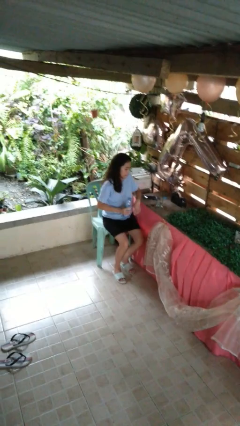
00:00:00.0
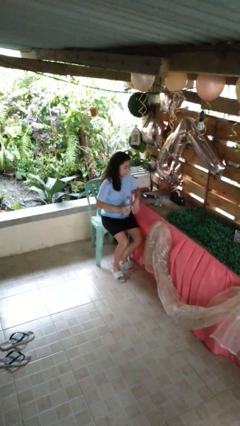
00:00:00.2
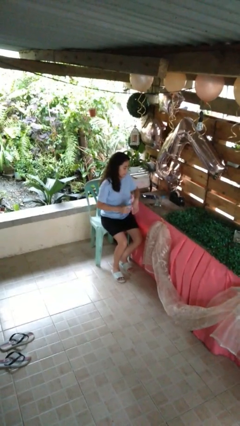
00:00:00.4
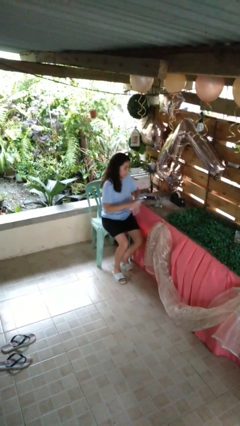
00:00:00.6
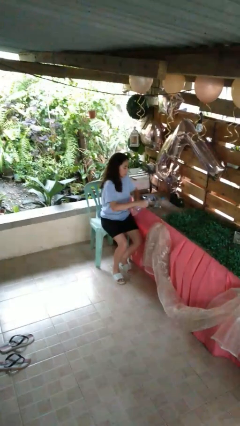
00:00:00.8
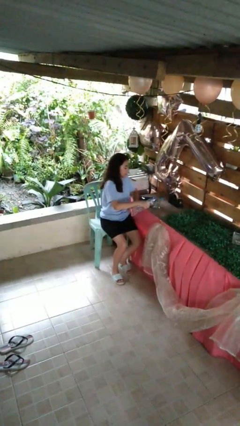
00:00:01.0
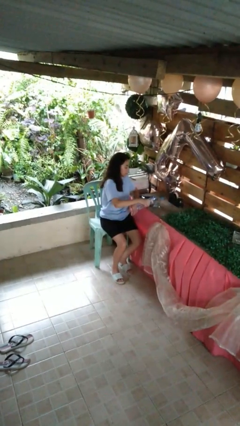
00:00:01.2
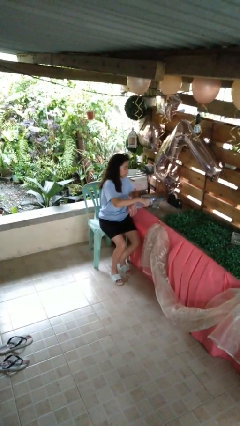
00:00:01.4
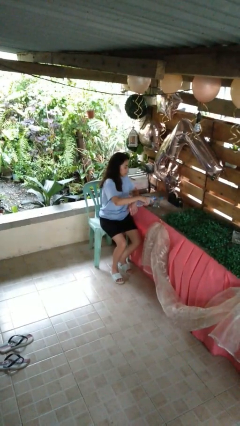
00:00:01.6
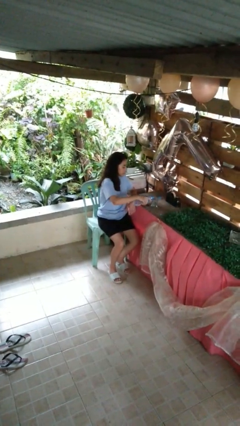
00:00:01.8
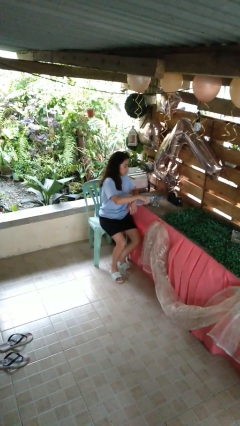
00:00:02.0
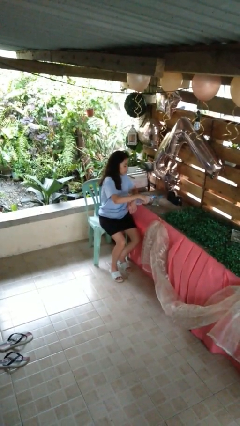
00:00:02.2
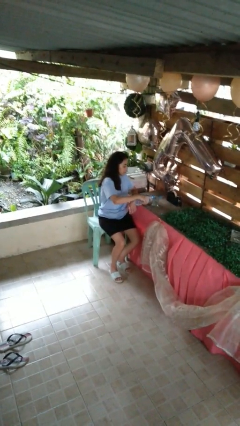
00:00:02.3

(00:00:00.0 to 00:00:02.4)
person pours liquid into cup

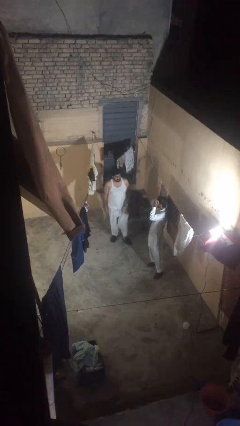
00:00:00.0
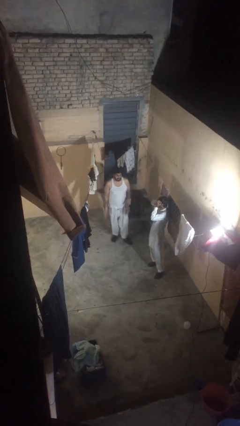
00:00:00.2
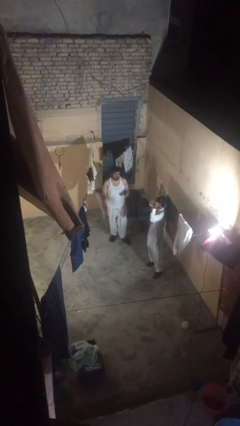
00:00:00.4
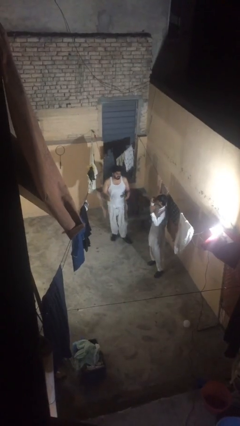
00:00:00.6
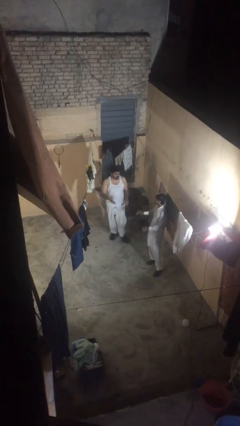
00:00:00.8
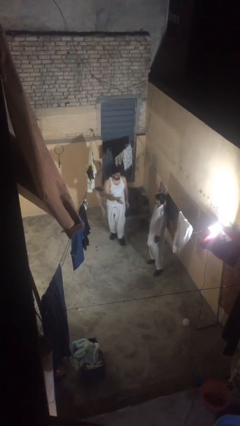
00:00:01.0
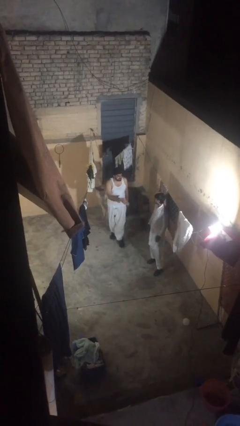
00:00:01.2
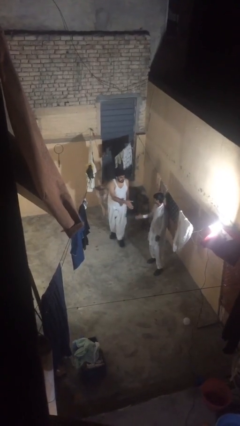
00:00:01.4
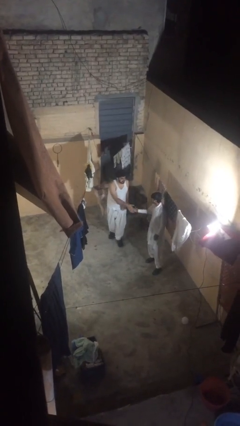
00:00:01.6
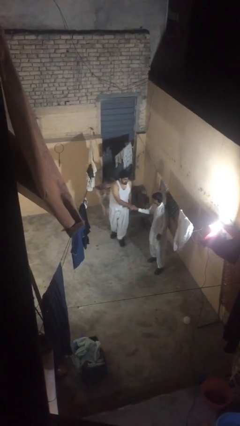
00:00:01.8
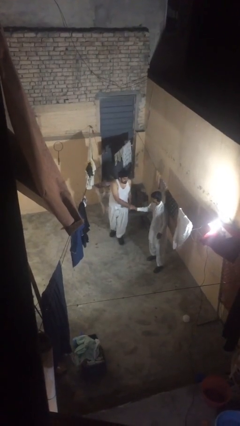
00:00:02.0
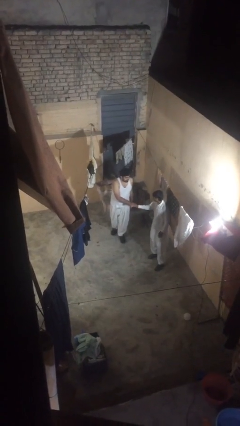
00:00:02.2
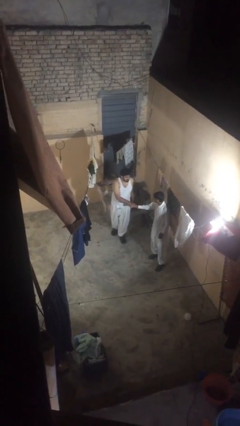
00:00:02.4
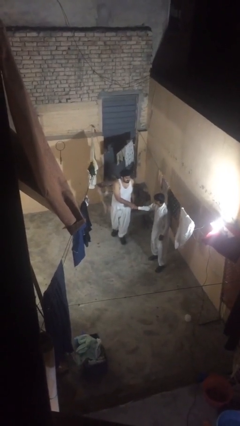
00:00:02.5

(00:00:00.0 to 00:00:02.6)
person shakes hand

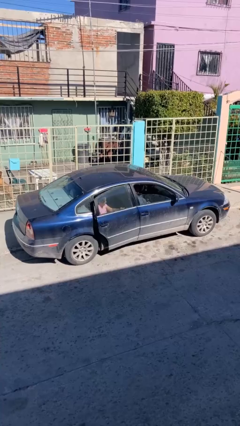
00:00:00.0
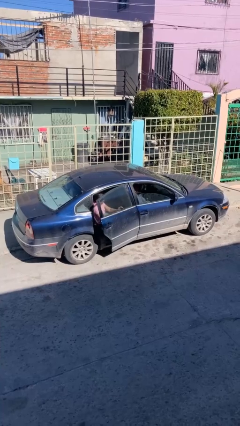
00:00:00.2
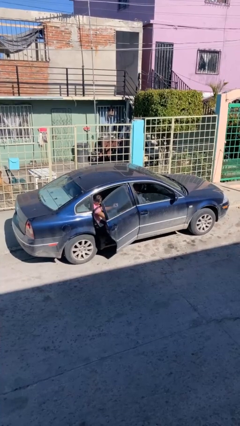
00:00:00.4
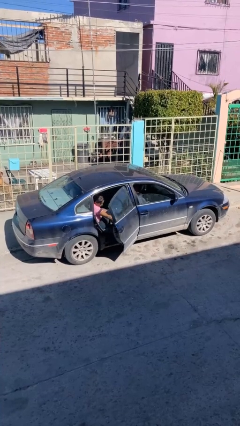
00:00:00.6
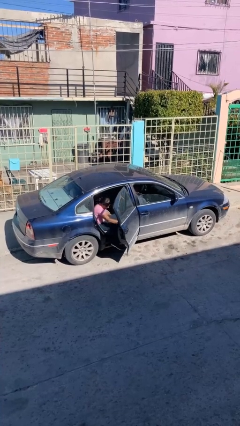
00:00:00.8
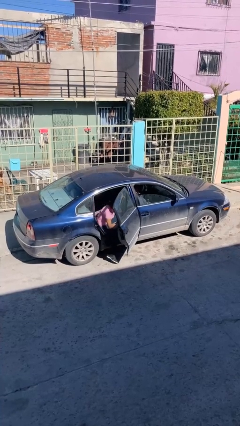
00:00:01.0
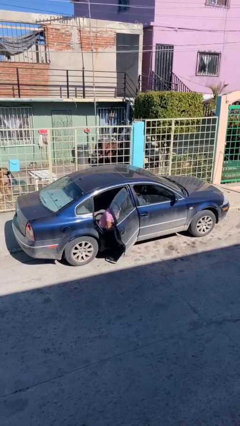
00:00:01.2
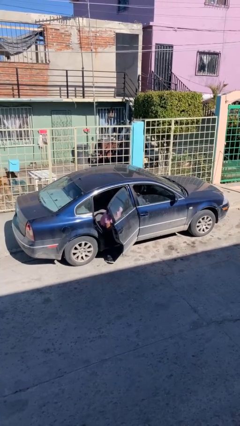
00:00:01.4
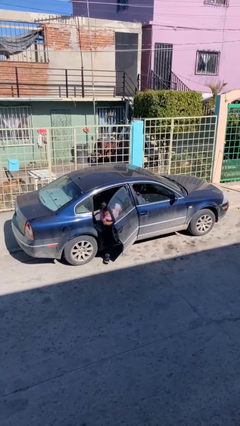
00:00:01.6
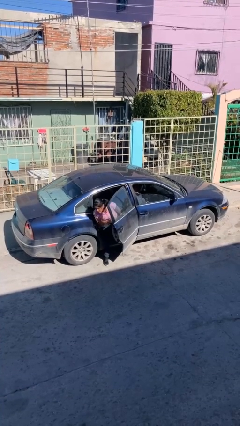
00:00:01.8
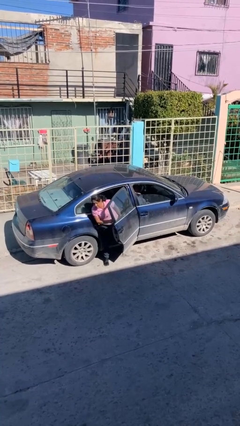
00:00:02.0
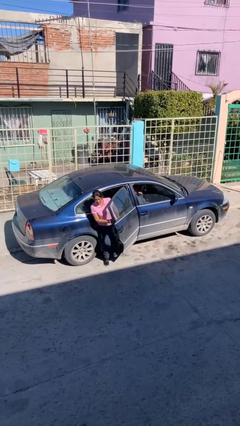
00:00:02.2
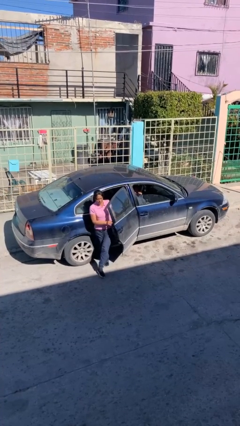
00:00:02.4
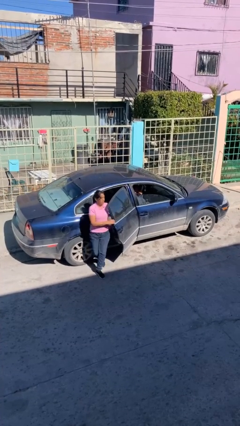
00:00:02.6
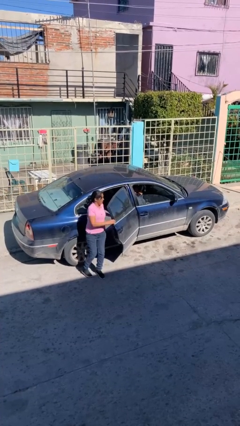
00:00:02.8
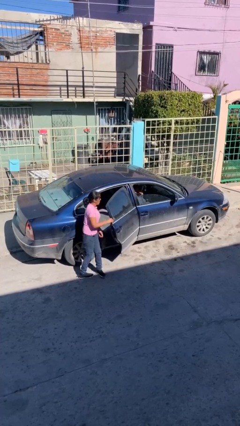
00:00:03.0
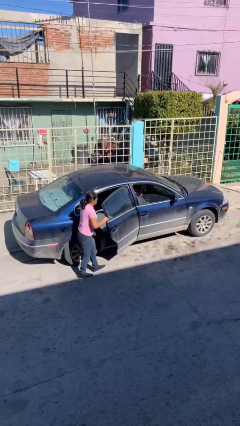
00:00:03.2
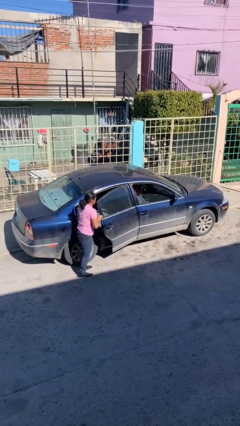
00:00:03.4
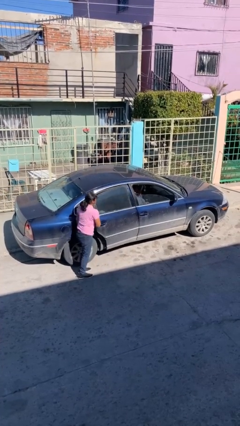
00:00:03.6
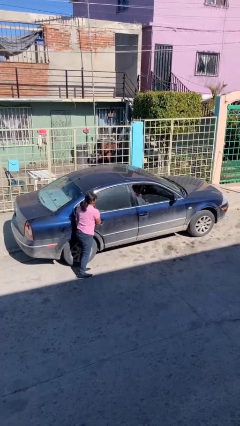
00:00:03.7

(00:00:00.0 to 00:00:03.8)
car drops off person

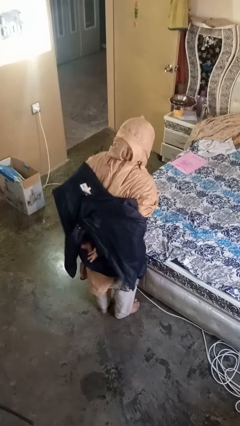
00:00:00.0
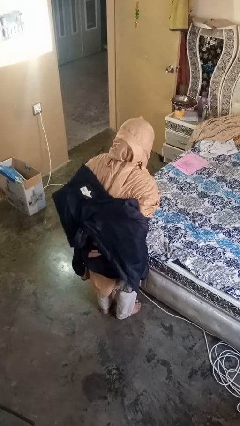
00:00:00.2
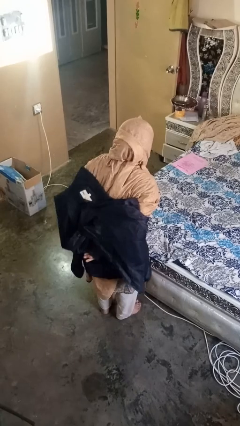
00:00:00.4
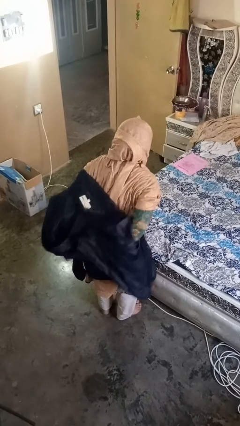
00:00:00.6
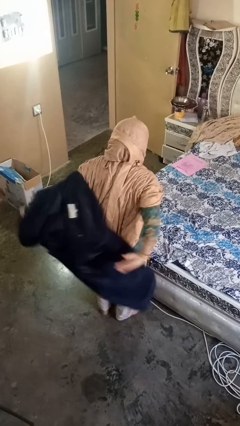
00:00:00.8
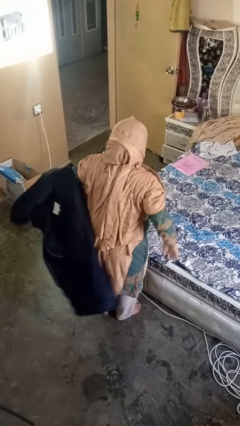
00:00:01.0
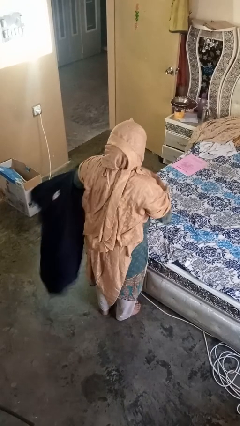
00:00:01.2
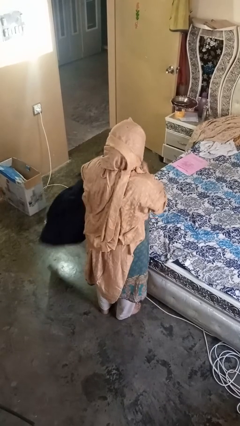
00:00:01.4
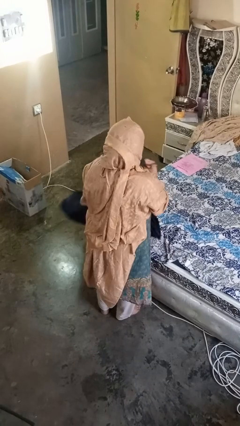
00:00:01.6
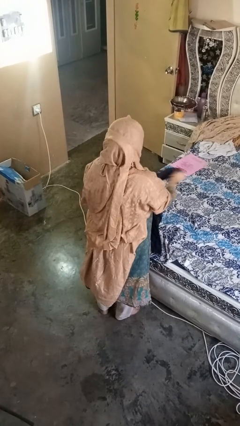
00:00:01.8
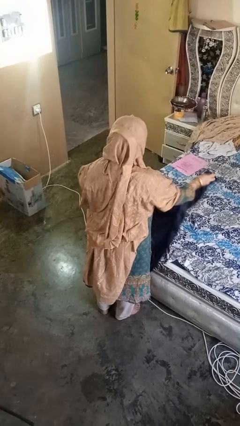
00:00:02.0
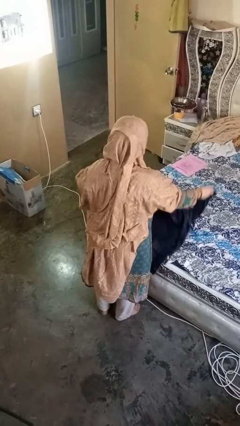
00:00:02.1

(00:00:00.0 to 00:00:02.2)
person takes off jacket

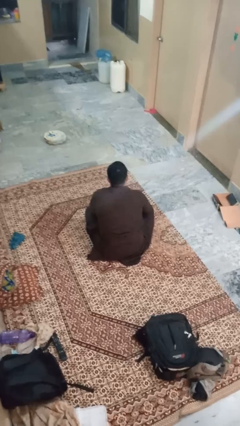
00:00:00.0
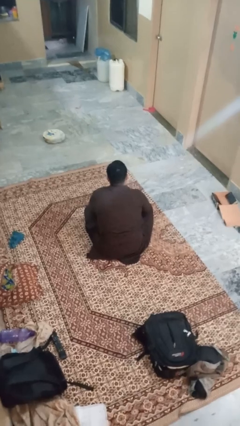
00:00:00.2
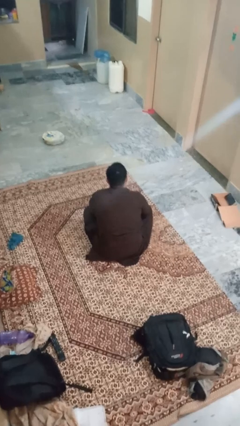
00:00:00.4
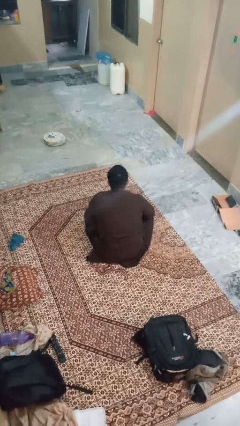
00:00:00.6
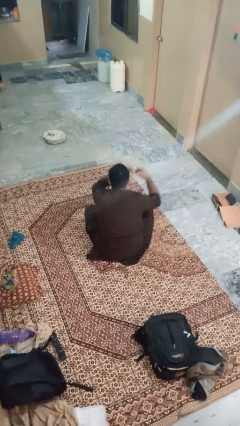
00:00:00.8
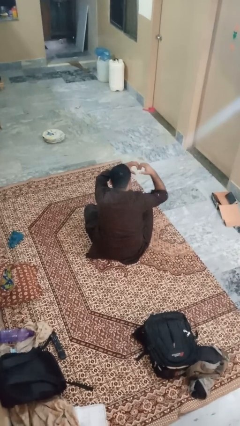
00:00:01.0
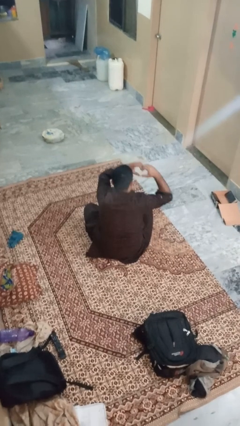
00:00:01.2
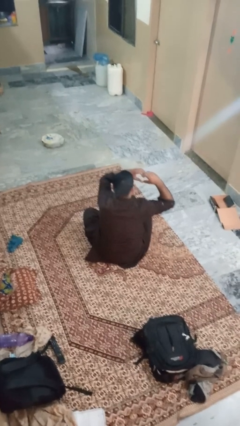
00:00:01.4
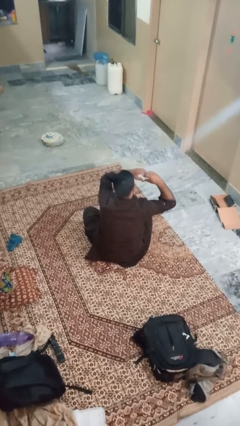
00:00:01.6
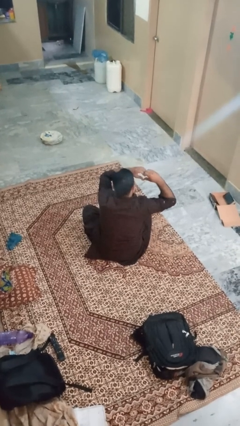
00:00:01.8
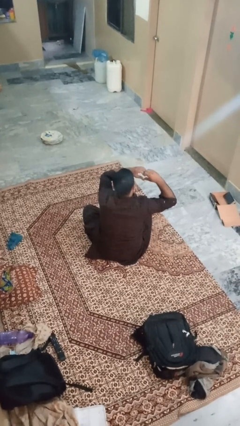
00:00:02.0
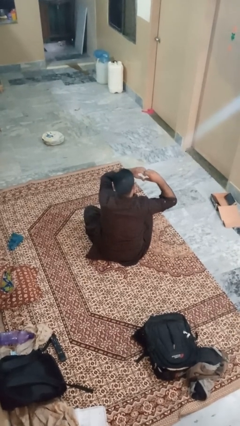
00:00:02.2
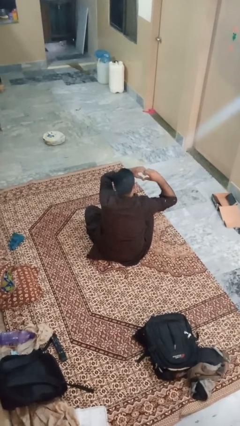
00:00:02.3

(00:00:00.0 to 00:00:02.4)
person gestures heart

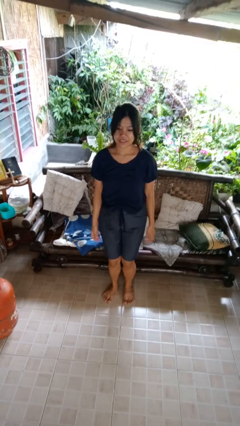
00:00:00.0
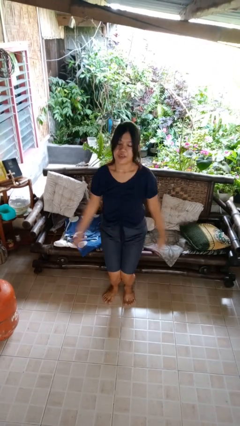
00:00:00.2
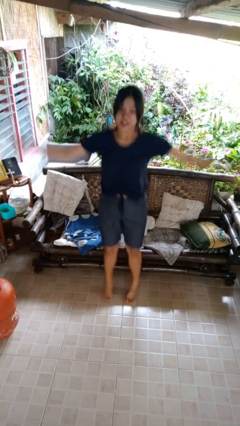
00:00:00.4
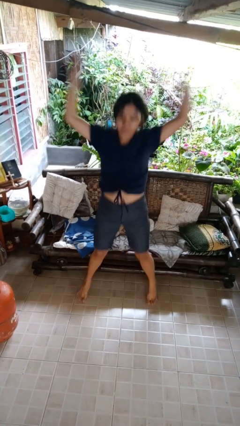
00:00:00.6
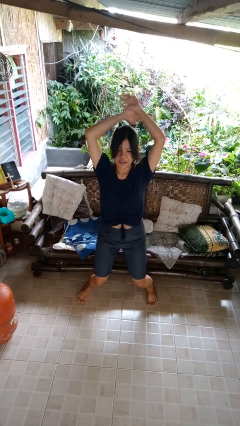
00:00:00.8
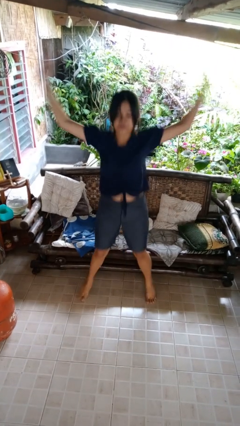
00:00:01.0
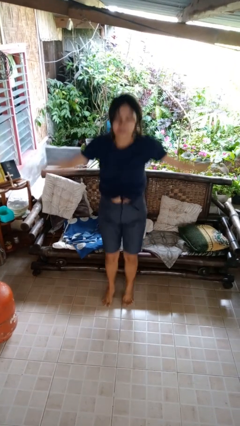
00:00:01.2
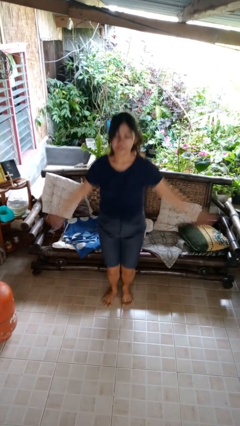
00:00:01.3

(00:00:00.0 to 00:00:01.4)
person exercises with jumping jacks

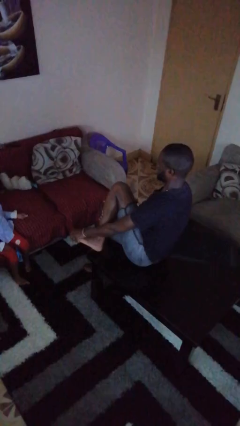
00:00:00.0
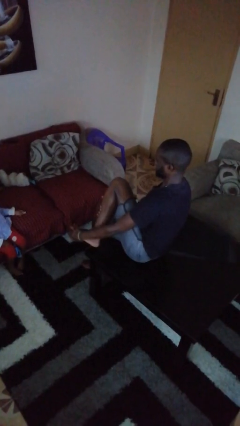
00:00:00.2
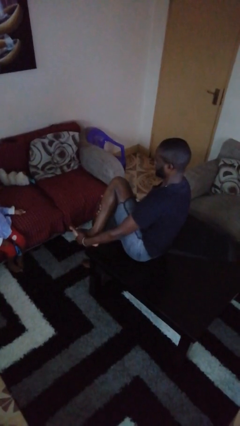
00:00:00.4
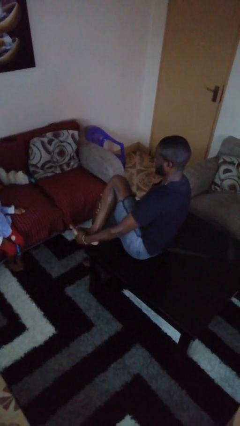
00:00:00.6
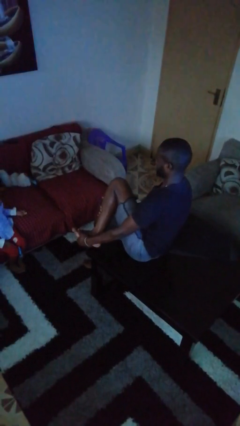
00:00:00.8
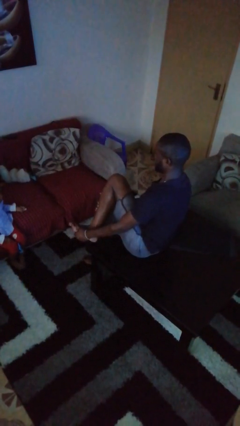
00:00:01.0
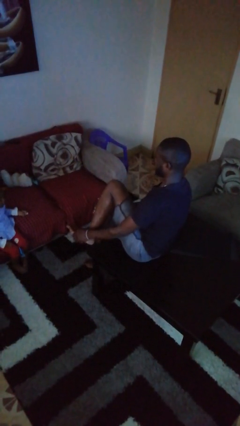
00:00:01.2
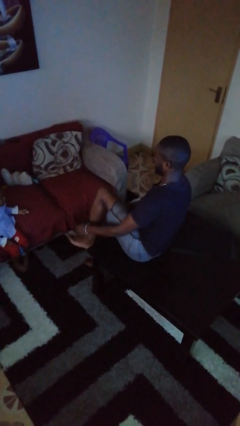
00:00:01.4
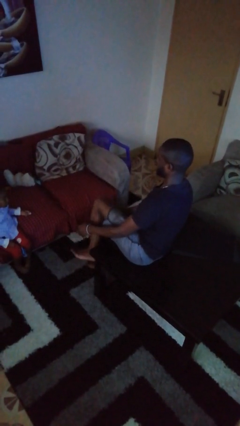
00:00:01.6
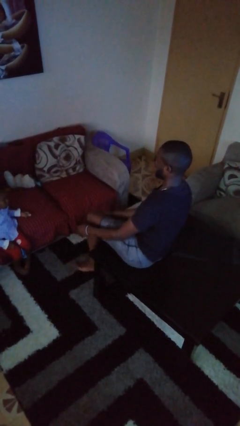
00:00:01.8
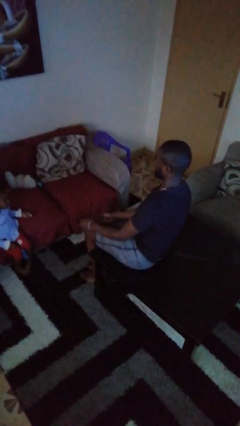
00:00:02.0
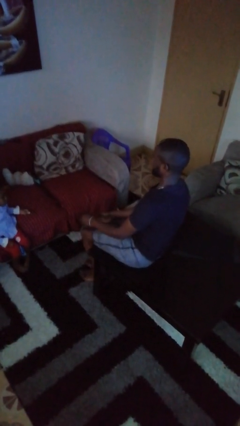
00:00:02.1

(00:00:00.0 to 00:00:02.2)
person rubs foot
